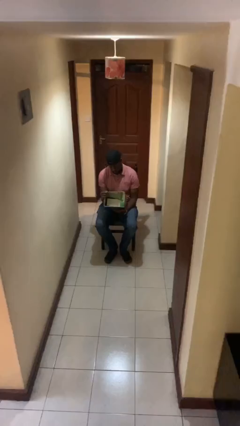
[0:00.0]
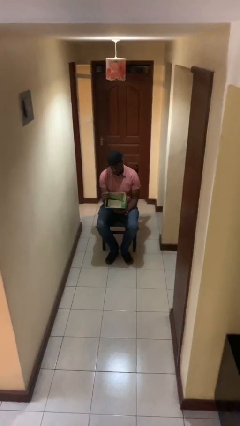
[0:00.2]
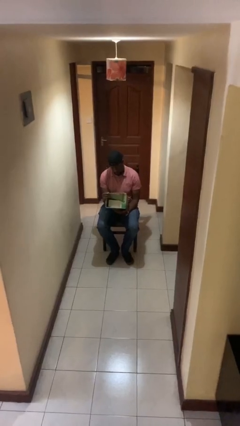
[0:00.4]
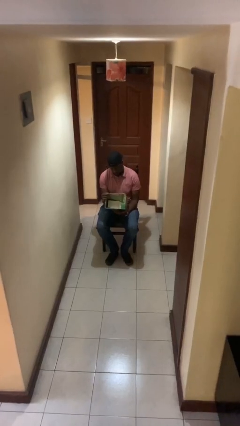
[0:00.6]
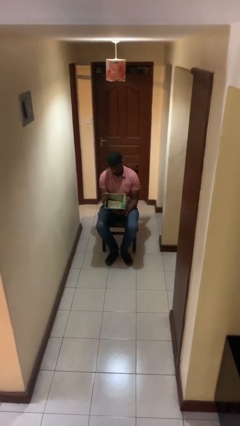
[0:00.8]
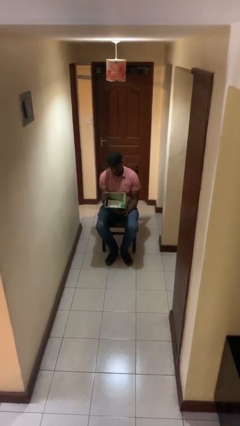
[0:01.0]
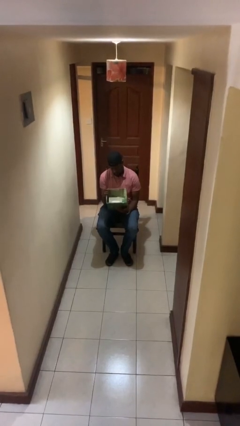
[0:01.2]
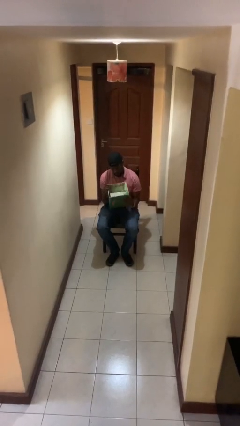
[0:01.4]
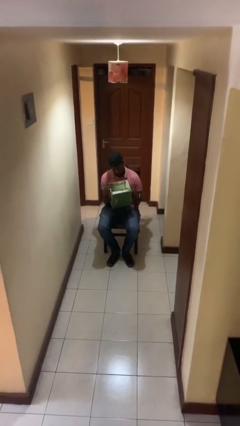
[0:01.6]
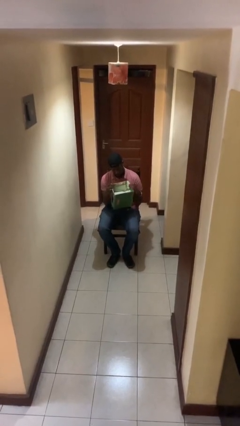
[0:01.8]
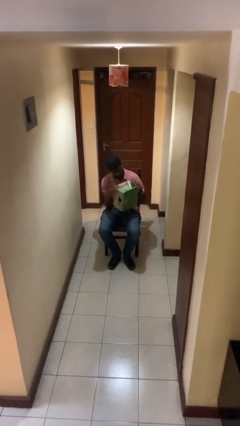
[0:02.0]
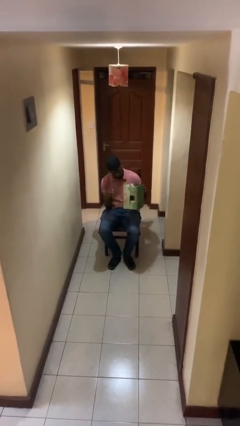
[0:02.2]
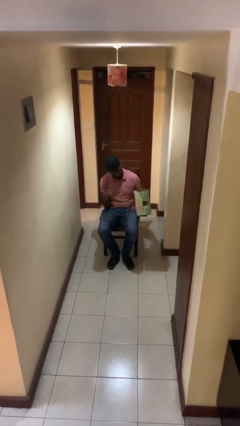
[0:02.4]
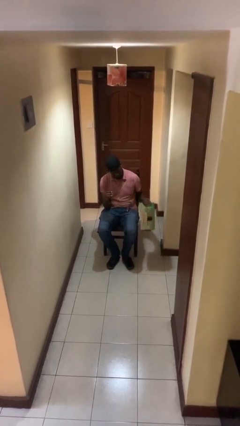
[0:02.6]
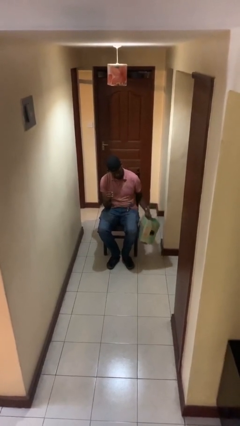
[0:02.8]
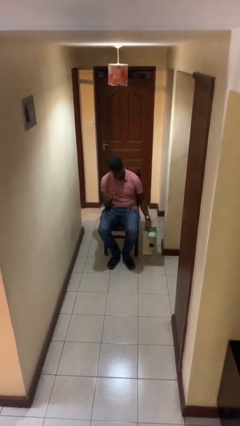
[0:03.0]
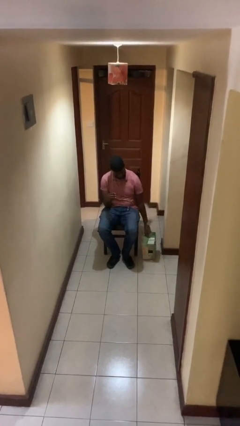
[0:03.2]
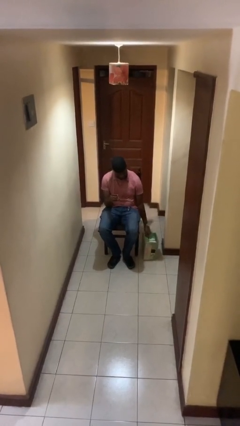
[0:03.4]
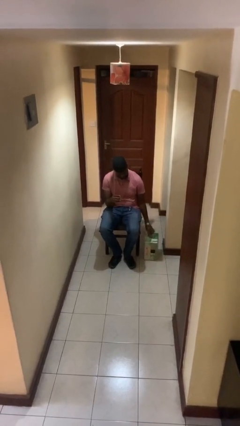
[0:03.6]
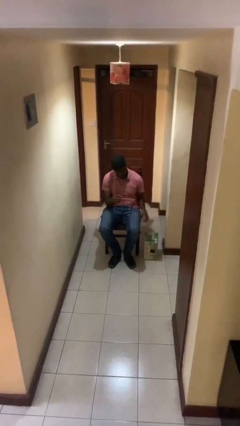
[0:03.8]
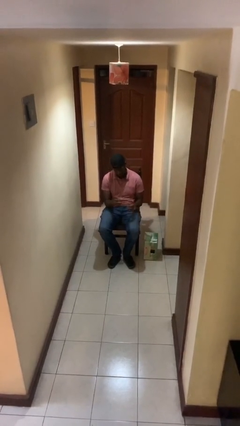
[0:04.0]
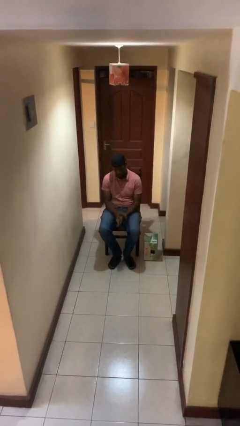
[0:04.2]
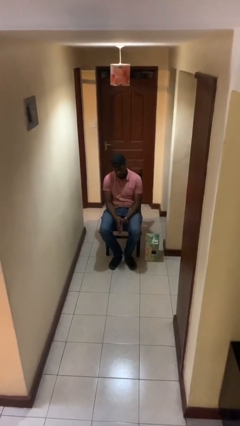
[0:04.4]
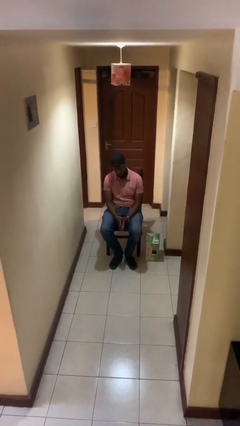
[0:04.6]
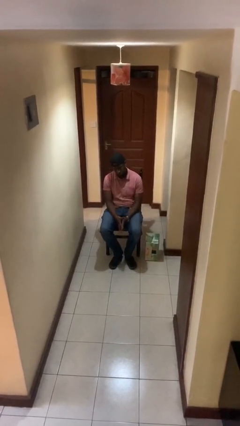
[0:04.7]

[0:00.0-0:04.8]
person puts down object on floor

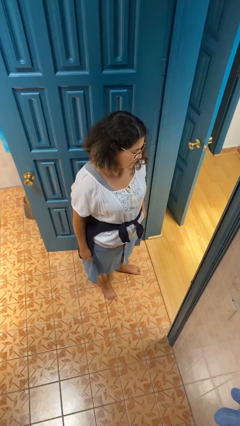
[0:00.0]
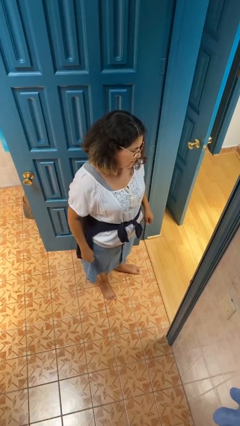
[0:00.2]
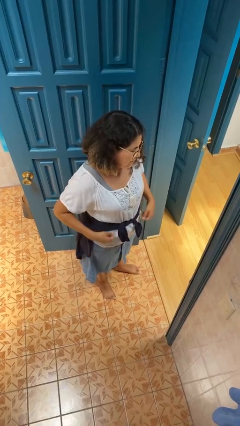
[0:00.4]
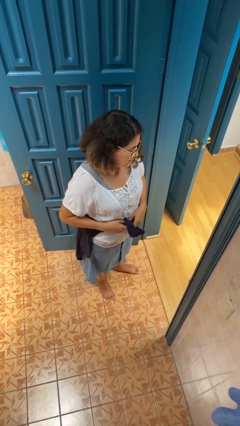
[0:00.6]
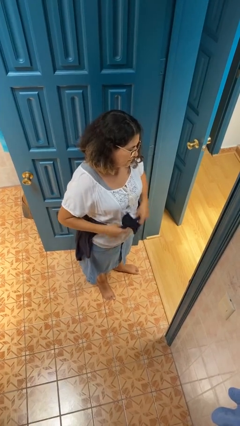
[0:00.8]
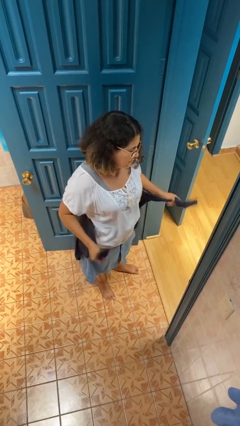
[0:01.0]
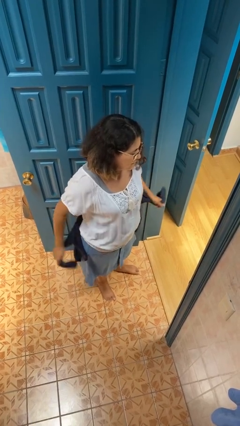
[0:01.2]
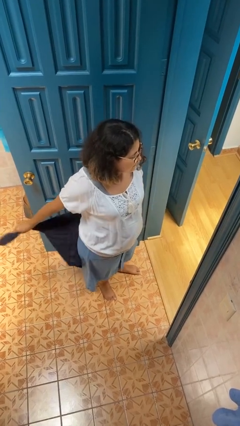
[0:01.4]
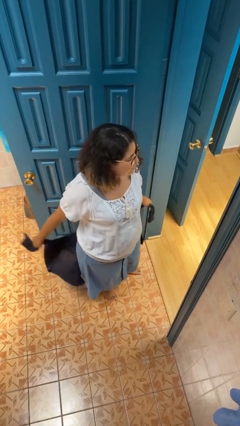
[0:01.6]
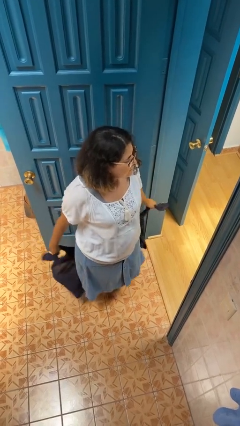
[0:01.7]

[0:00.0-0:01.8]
person unties jacket around waist

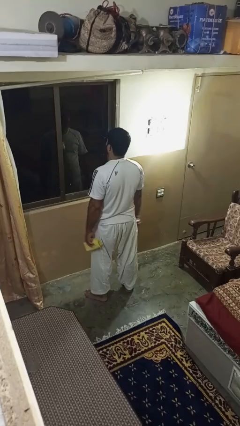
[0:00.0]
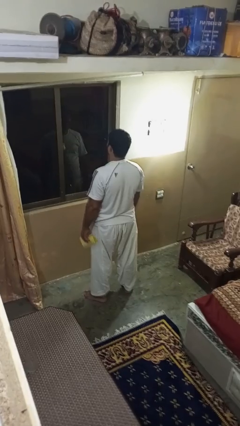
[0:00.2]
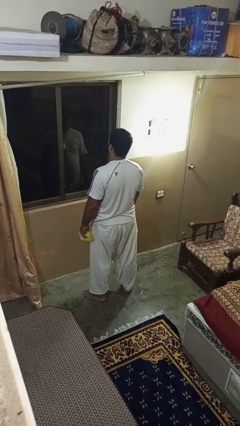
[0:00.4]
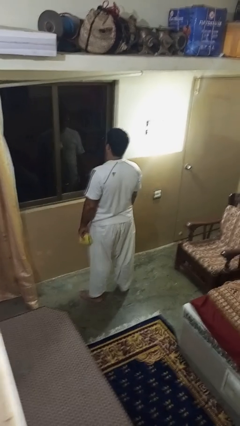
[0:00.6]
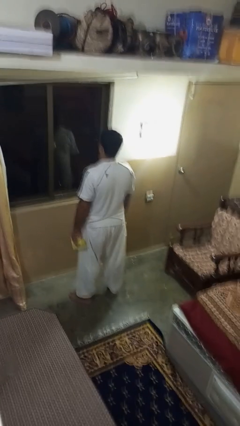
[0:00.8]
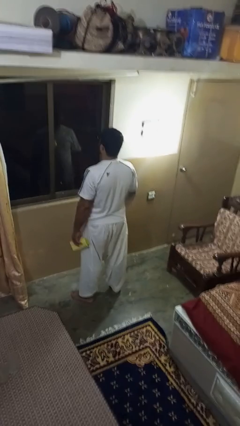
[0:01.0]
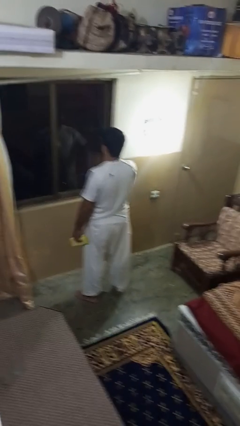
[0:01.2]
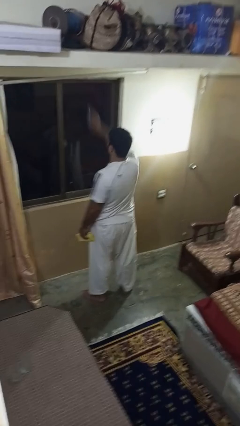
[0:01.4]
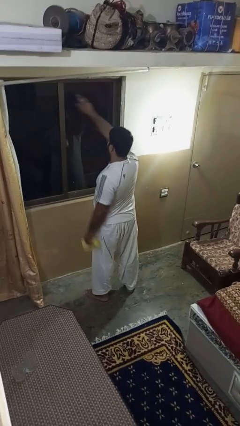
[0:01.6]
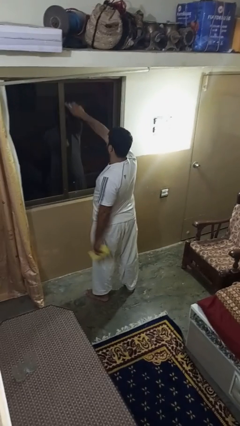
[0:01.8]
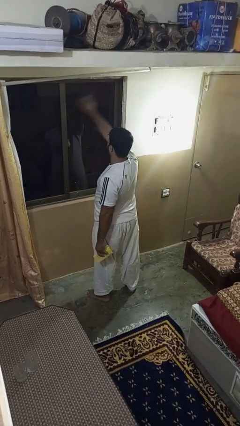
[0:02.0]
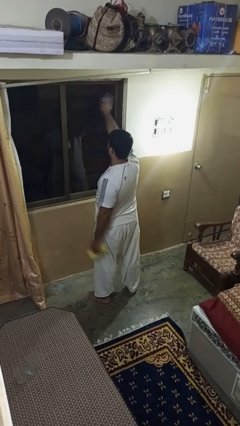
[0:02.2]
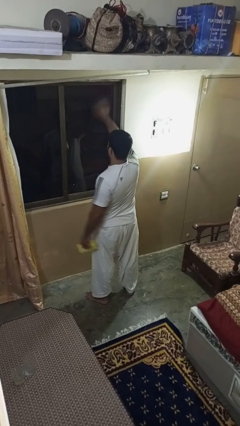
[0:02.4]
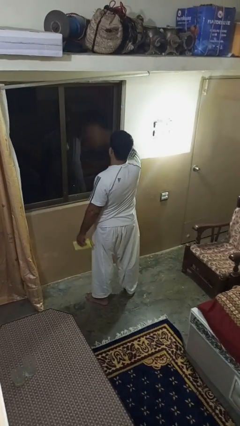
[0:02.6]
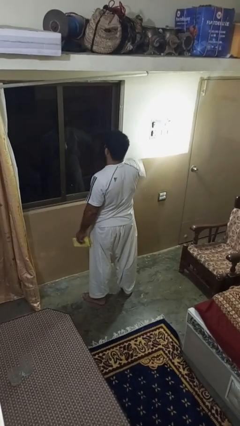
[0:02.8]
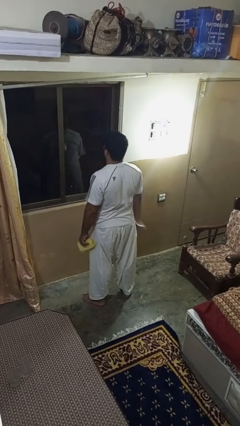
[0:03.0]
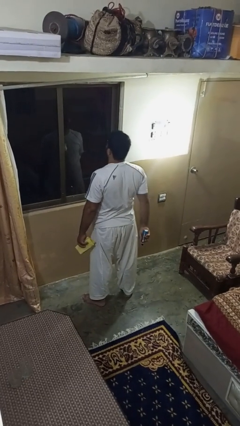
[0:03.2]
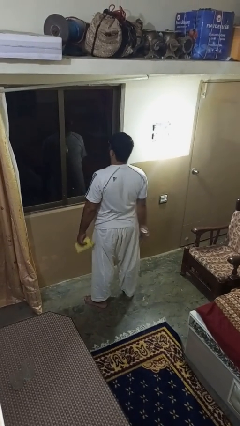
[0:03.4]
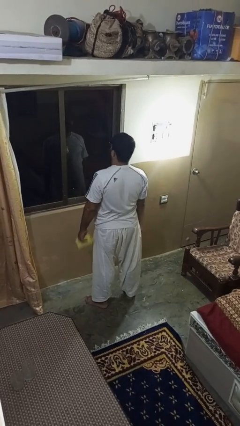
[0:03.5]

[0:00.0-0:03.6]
person sprays from bottle

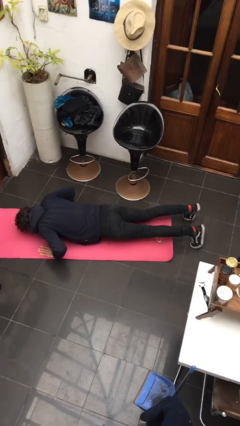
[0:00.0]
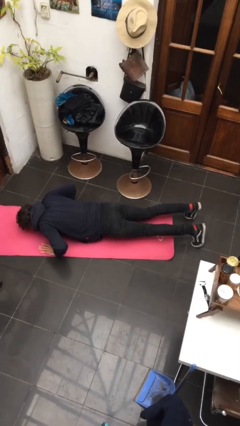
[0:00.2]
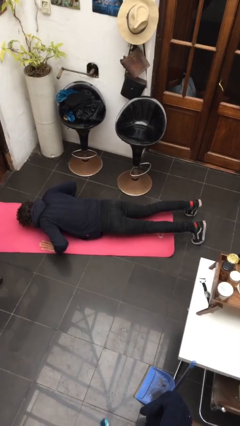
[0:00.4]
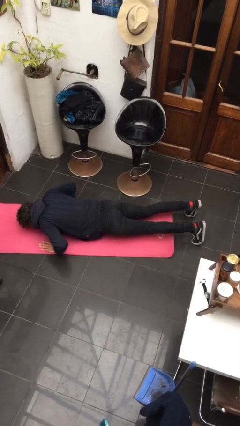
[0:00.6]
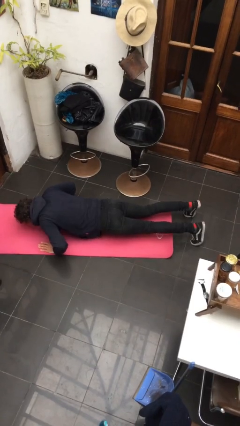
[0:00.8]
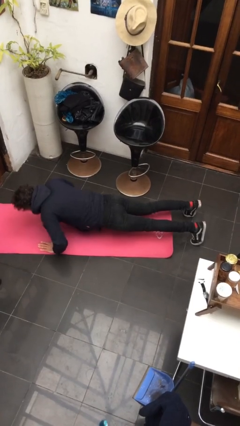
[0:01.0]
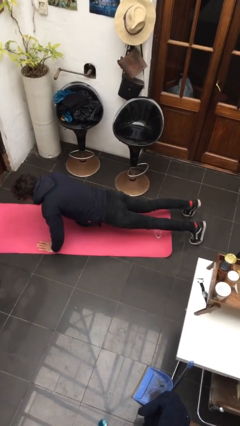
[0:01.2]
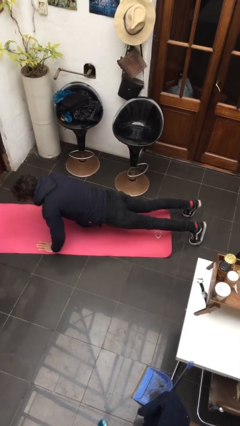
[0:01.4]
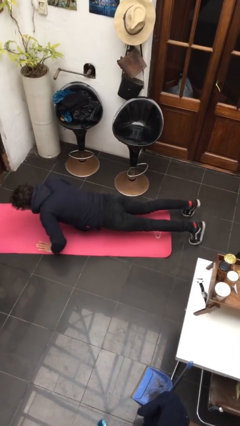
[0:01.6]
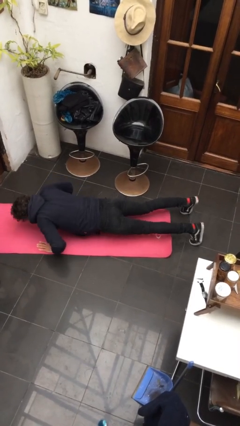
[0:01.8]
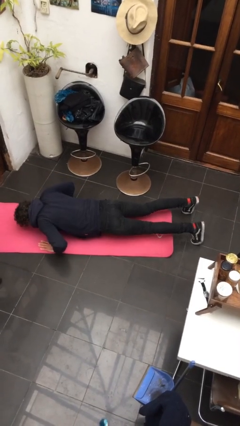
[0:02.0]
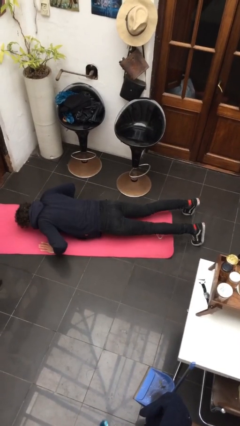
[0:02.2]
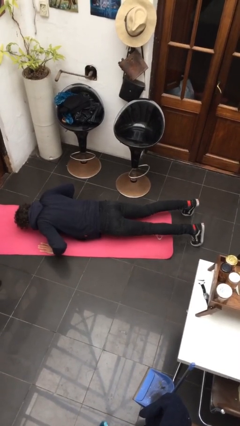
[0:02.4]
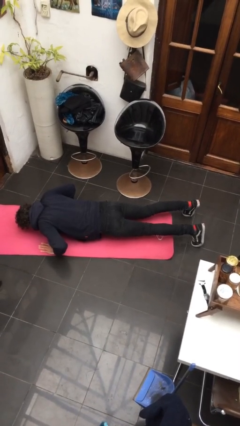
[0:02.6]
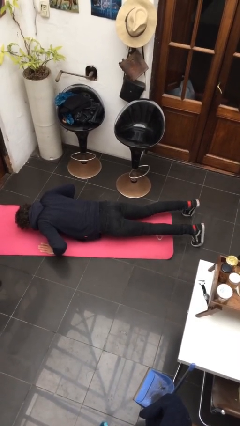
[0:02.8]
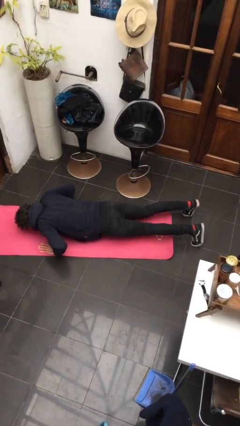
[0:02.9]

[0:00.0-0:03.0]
person exercises with pushup

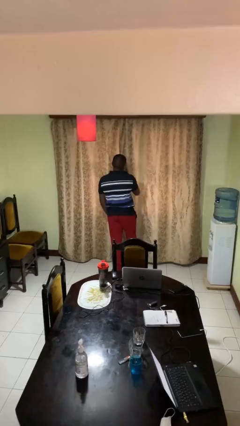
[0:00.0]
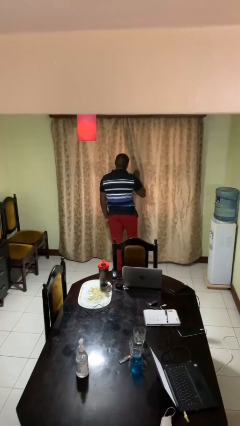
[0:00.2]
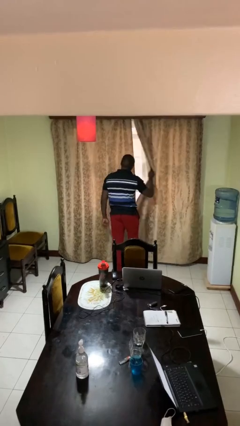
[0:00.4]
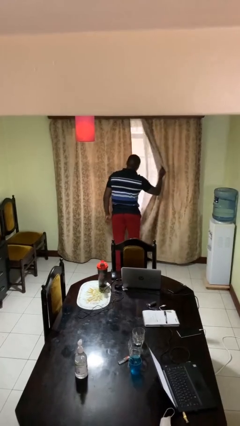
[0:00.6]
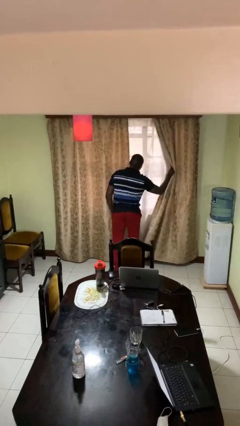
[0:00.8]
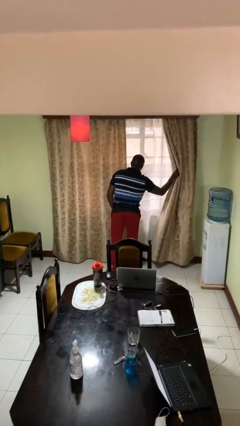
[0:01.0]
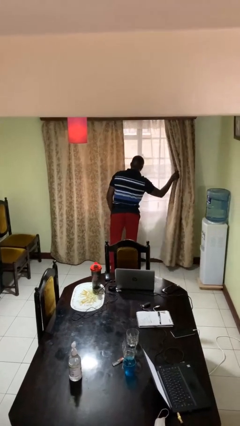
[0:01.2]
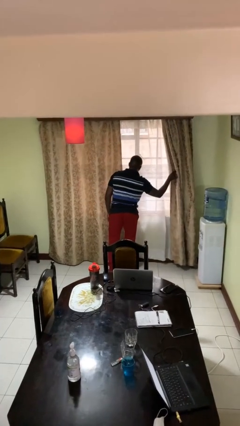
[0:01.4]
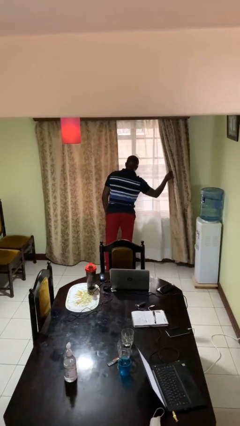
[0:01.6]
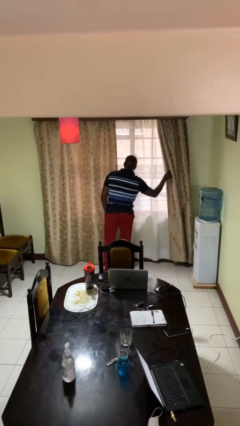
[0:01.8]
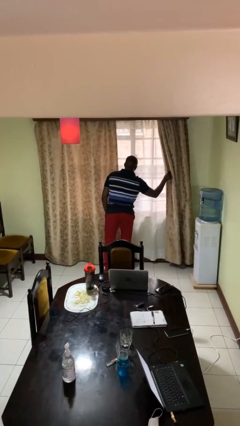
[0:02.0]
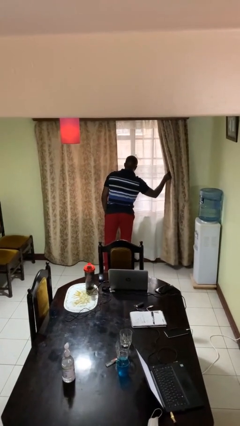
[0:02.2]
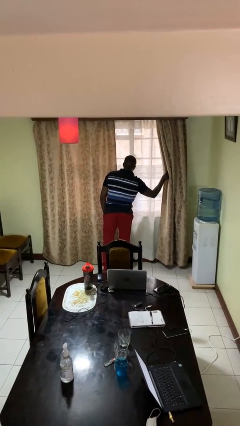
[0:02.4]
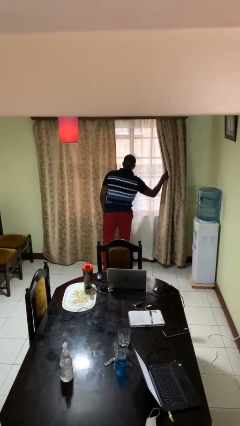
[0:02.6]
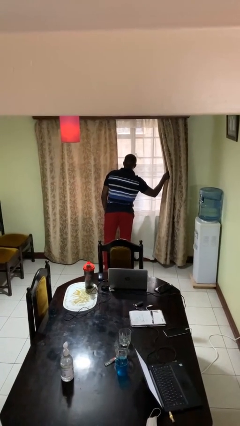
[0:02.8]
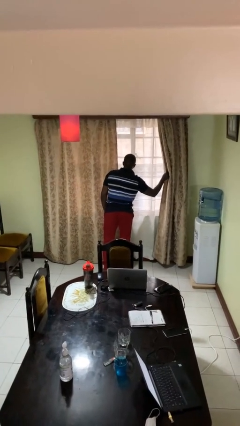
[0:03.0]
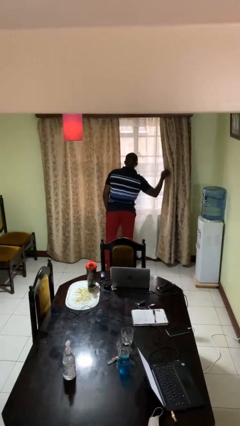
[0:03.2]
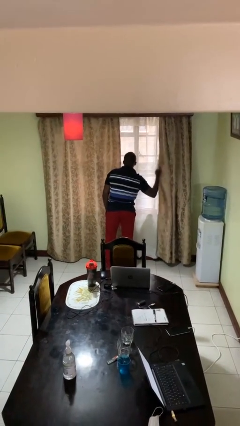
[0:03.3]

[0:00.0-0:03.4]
person opens curtains

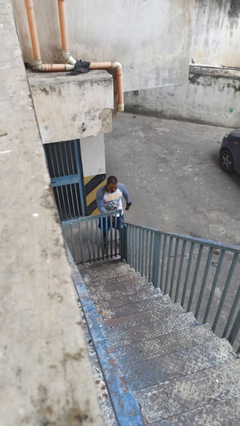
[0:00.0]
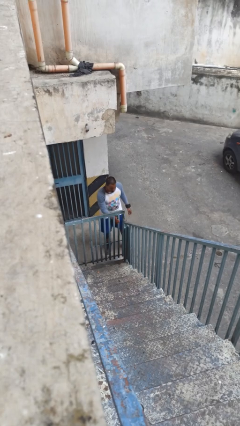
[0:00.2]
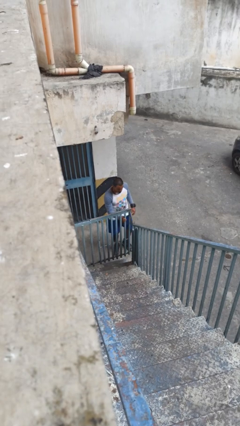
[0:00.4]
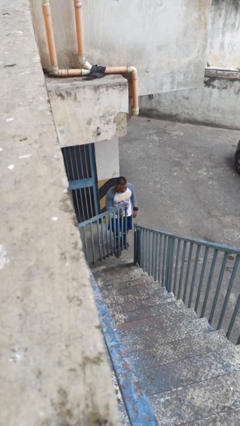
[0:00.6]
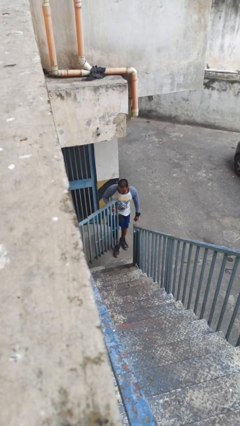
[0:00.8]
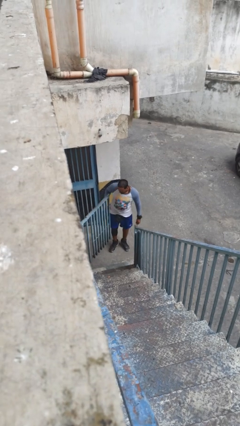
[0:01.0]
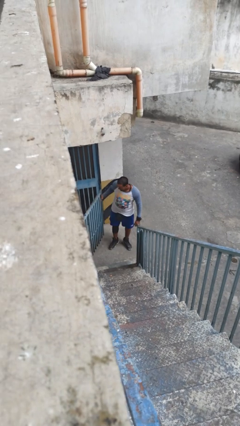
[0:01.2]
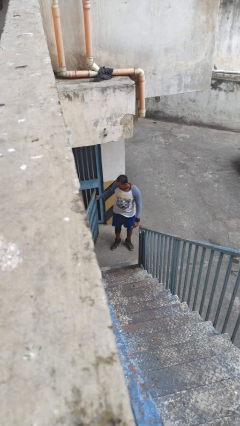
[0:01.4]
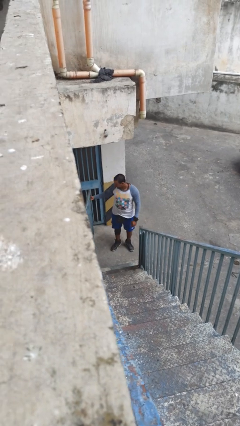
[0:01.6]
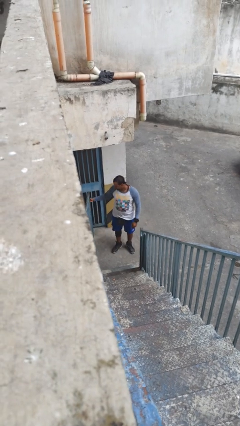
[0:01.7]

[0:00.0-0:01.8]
person opens facility door
